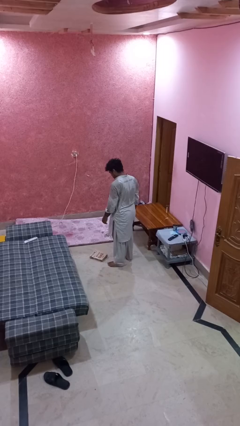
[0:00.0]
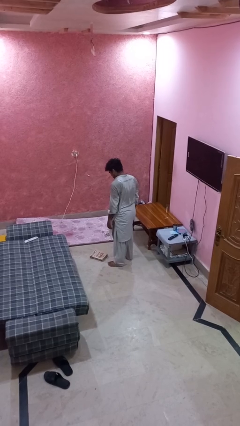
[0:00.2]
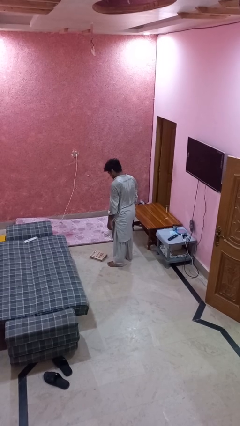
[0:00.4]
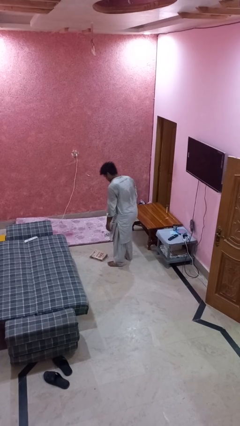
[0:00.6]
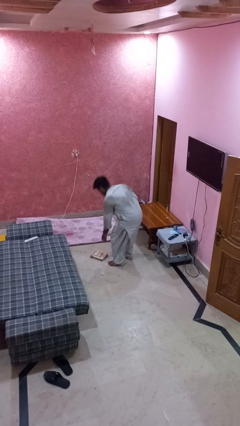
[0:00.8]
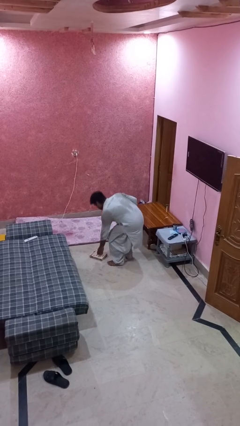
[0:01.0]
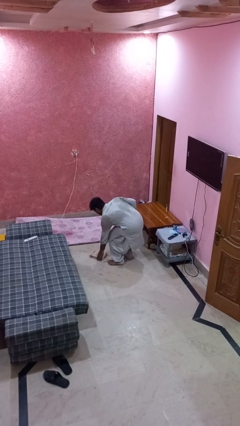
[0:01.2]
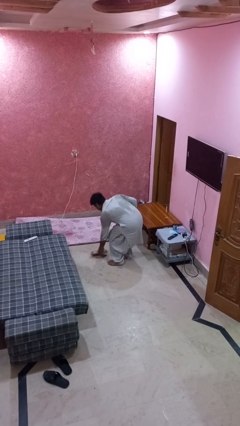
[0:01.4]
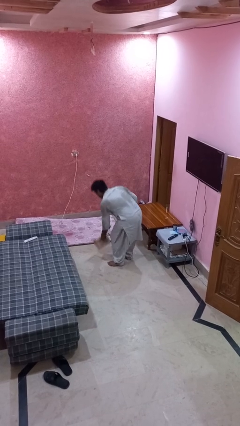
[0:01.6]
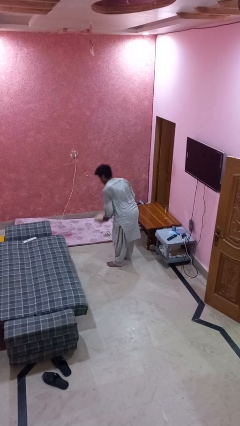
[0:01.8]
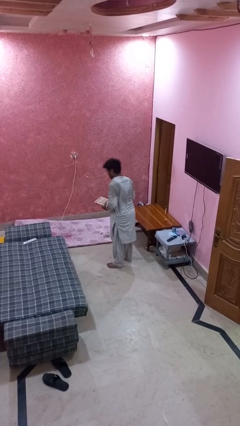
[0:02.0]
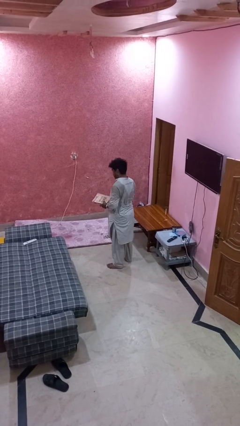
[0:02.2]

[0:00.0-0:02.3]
person picks up object from floor

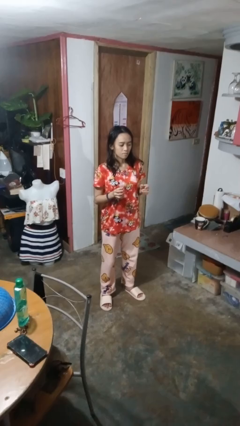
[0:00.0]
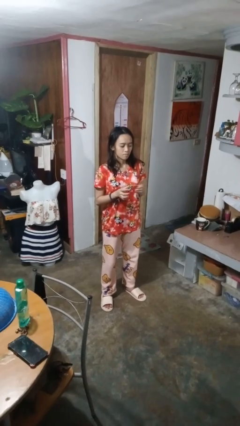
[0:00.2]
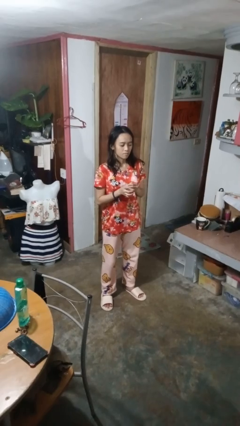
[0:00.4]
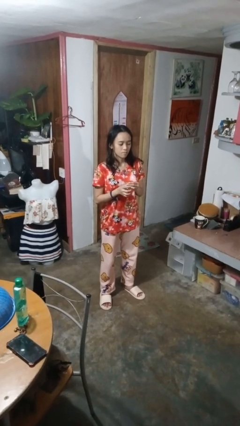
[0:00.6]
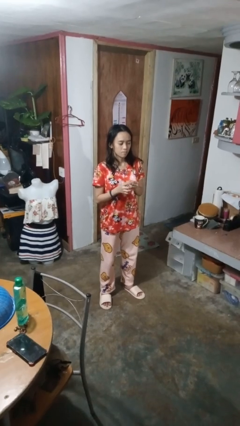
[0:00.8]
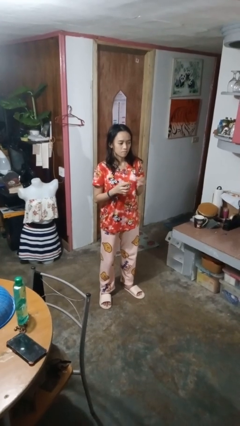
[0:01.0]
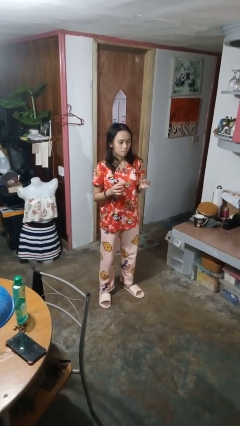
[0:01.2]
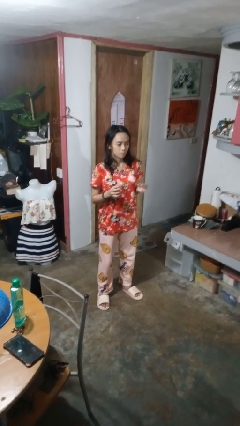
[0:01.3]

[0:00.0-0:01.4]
person takes off ring

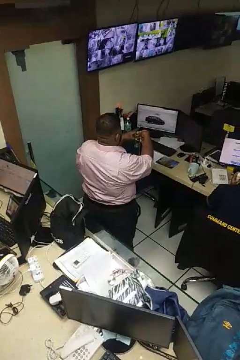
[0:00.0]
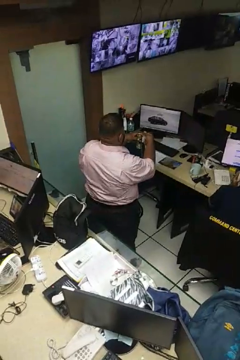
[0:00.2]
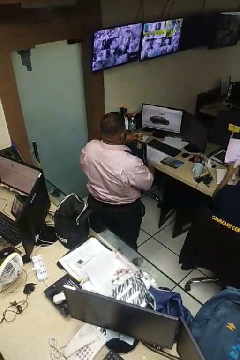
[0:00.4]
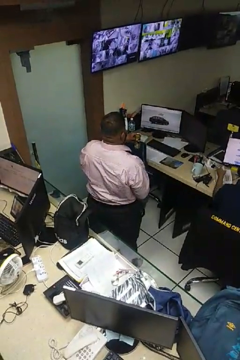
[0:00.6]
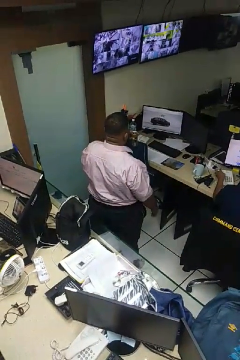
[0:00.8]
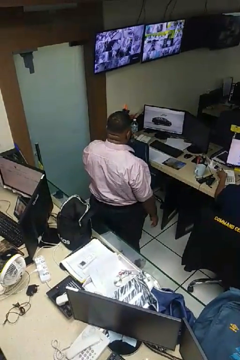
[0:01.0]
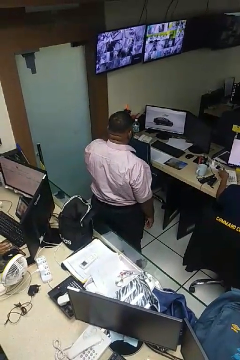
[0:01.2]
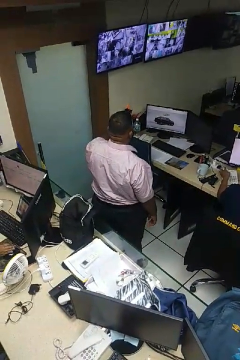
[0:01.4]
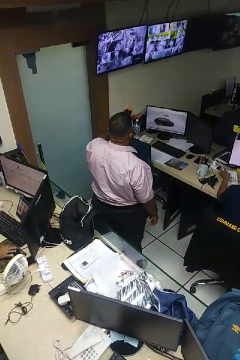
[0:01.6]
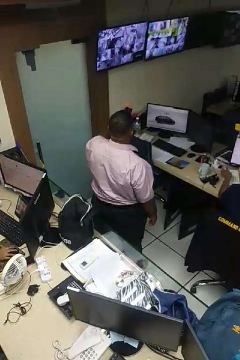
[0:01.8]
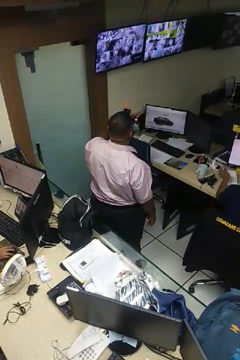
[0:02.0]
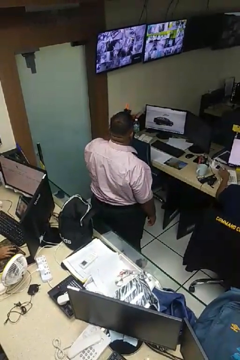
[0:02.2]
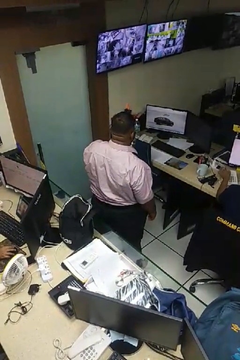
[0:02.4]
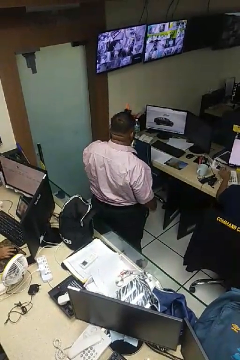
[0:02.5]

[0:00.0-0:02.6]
person drinks from beverage can

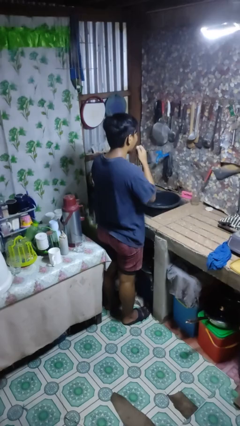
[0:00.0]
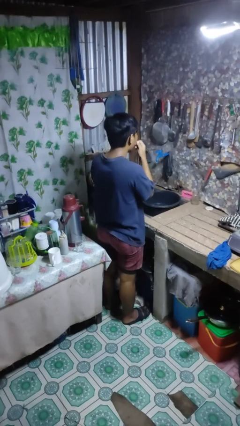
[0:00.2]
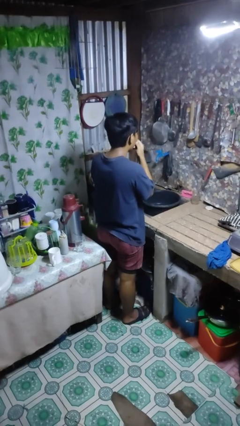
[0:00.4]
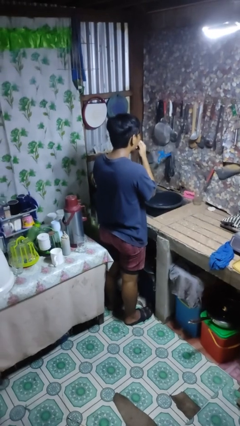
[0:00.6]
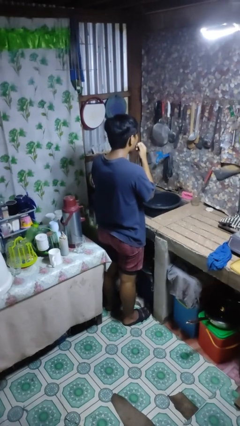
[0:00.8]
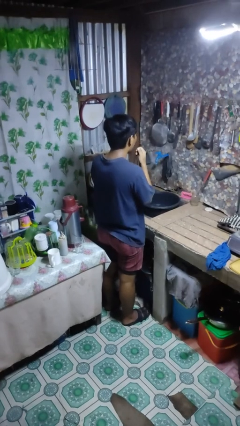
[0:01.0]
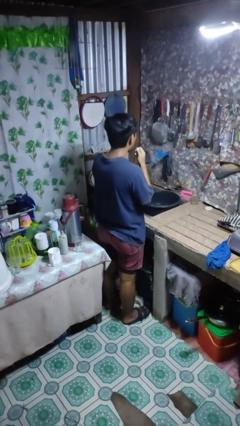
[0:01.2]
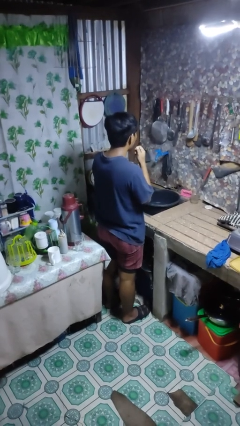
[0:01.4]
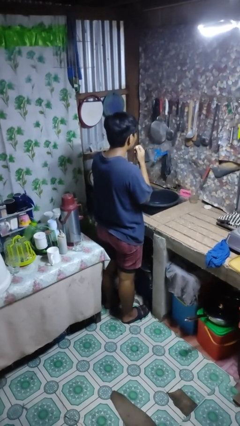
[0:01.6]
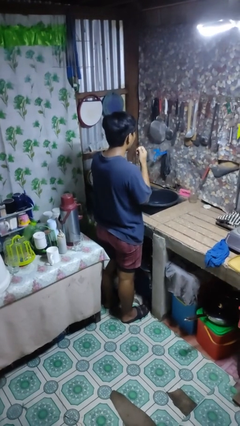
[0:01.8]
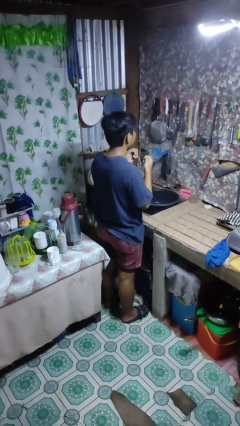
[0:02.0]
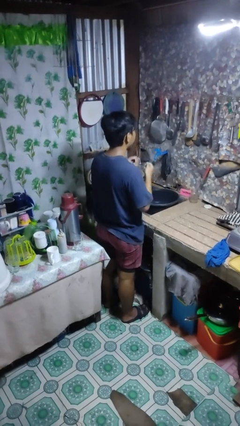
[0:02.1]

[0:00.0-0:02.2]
person flosses

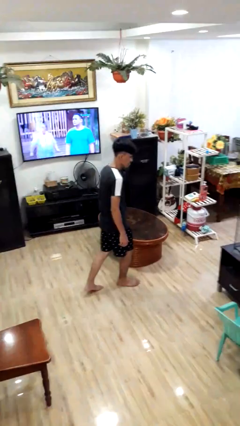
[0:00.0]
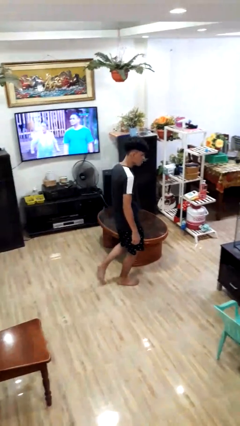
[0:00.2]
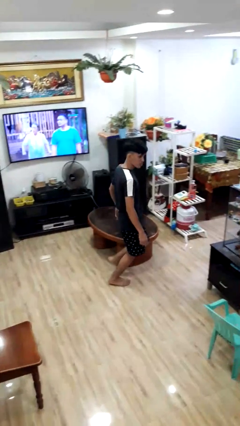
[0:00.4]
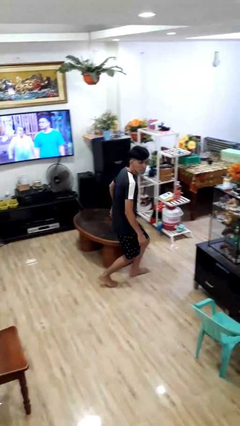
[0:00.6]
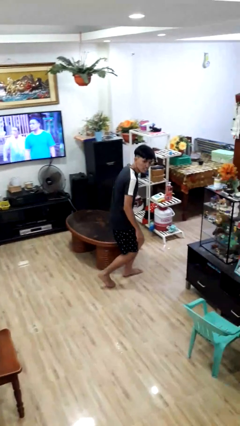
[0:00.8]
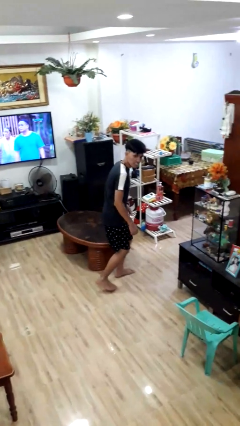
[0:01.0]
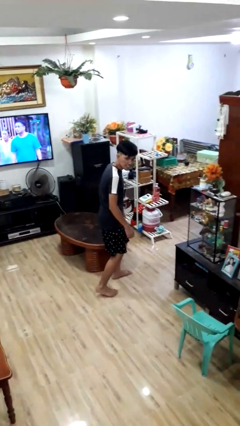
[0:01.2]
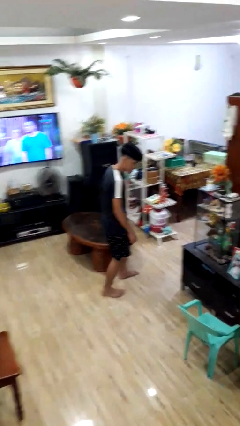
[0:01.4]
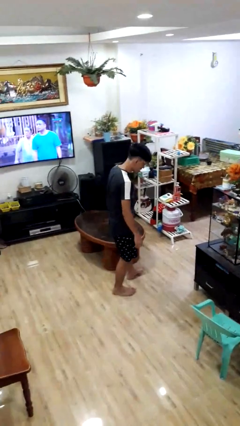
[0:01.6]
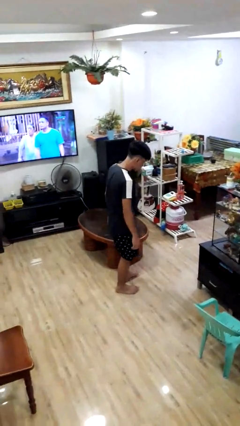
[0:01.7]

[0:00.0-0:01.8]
person bumps into table

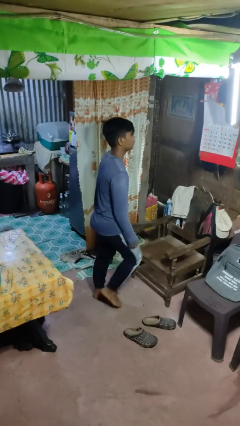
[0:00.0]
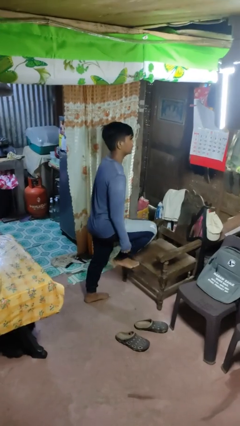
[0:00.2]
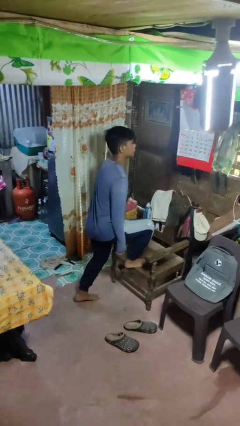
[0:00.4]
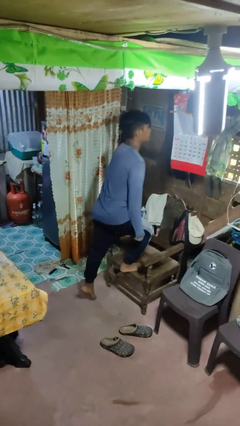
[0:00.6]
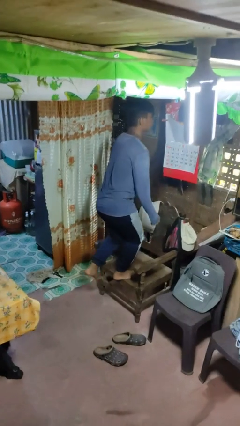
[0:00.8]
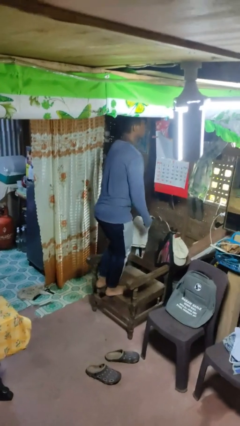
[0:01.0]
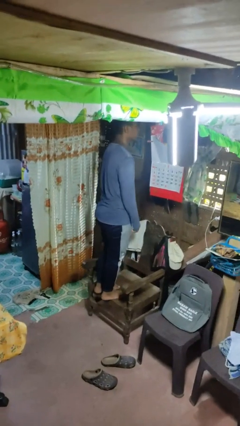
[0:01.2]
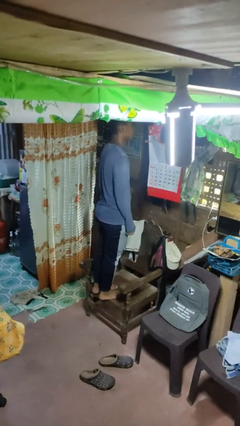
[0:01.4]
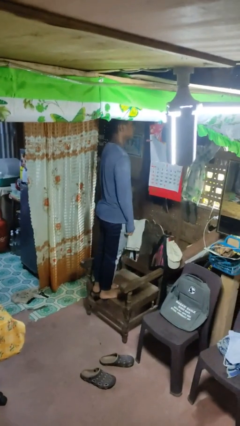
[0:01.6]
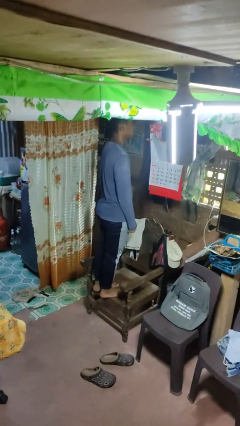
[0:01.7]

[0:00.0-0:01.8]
person climbs on chair

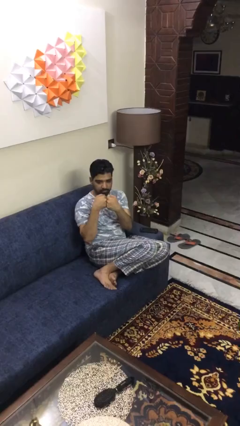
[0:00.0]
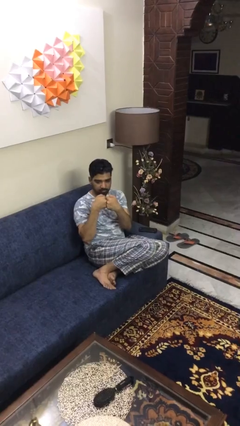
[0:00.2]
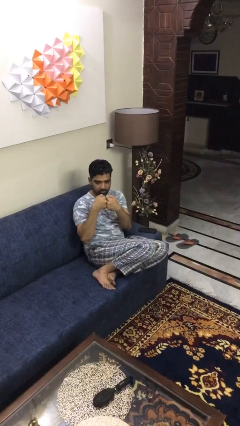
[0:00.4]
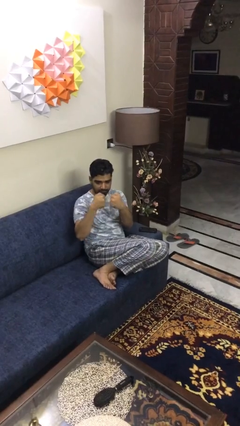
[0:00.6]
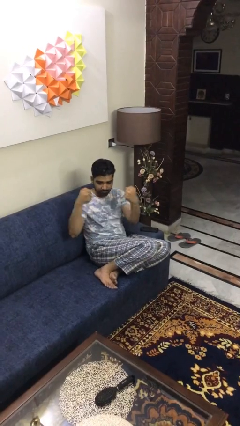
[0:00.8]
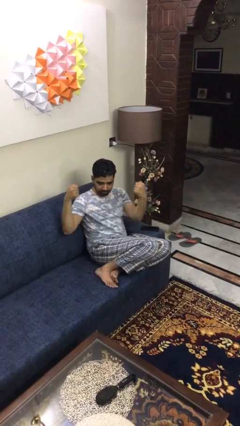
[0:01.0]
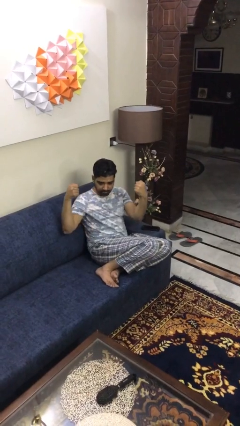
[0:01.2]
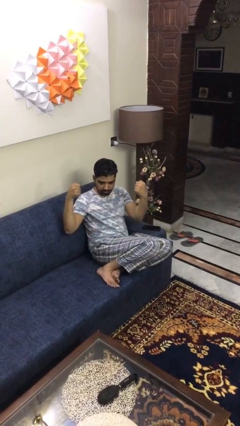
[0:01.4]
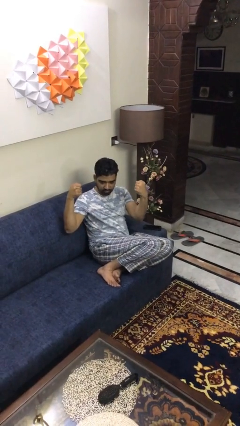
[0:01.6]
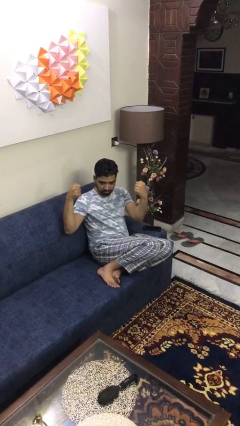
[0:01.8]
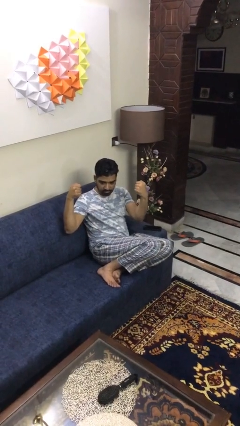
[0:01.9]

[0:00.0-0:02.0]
person gestures zoom in

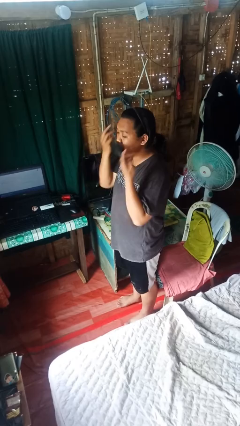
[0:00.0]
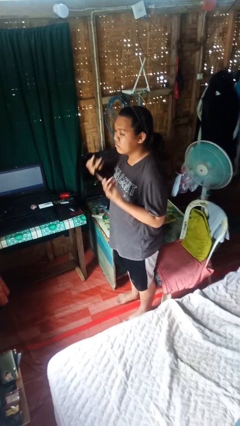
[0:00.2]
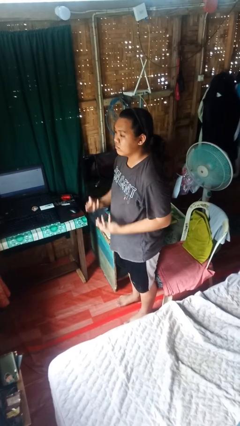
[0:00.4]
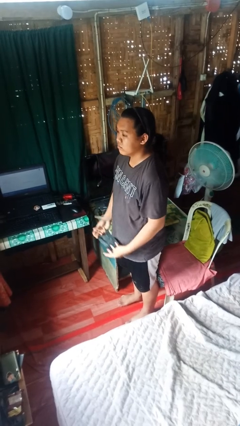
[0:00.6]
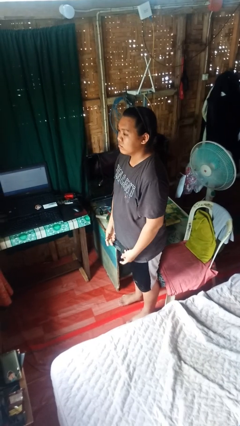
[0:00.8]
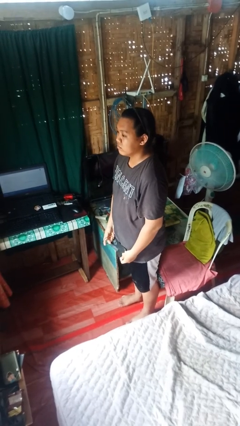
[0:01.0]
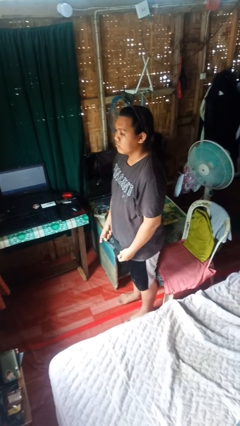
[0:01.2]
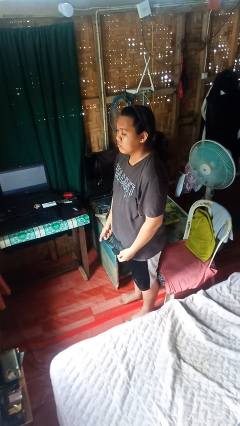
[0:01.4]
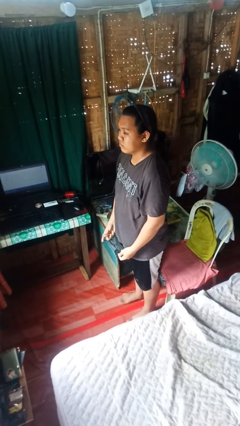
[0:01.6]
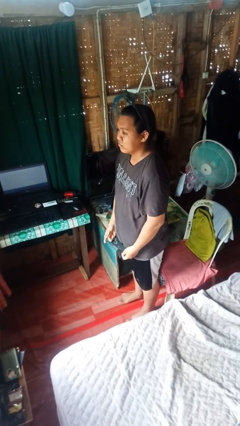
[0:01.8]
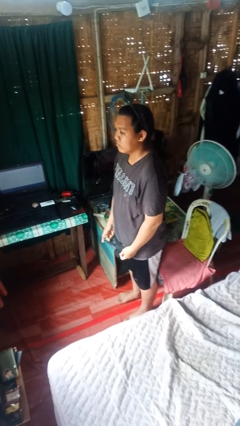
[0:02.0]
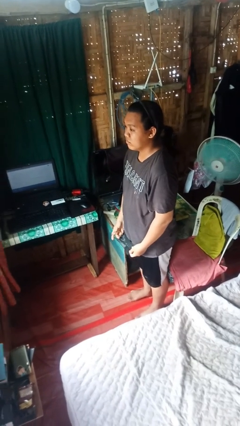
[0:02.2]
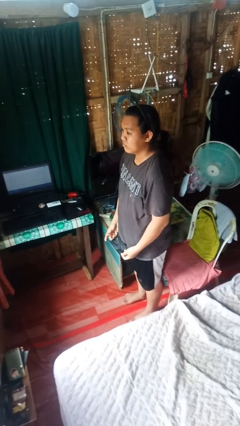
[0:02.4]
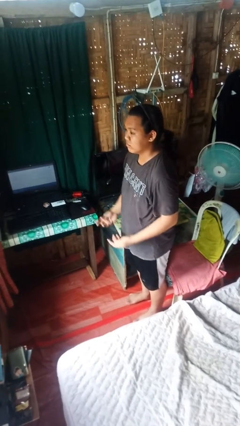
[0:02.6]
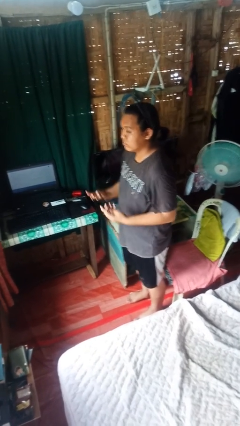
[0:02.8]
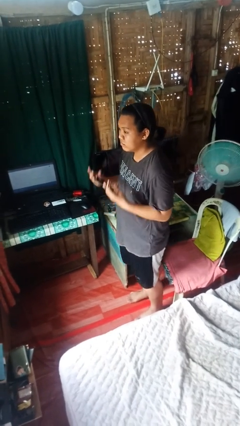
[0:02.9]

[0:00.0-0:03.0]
person takes off facemask

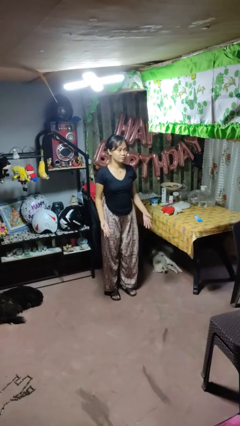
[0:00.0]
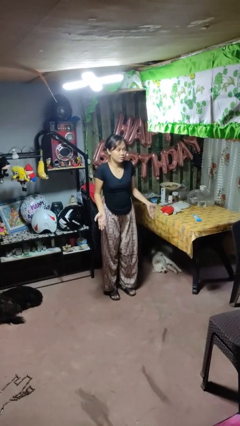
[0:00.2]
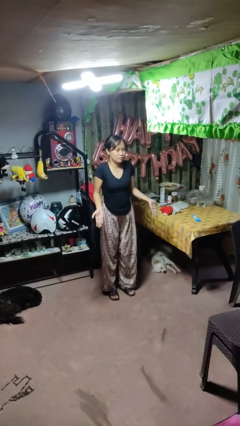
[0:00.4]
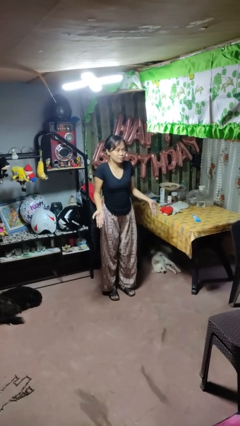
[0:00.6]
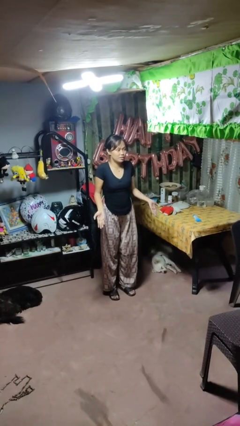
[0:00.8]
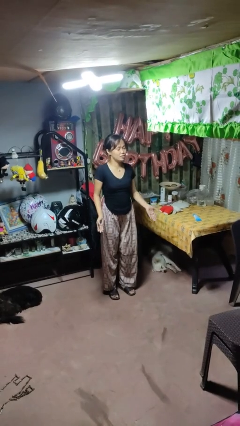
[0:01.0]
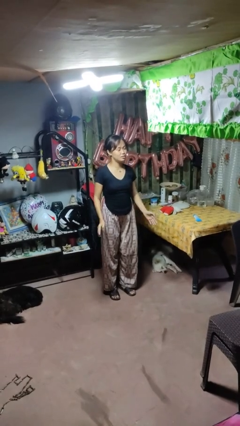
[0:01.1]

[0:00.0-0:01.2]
person shrugs
